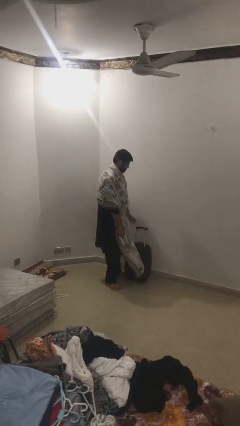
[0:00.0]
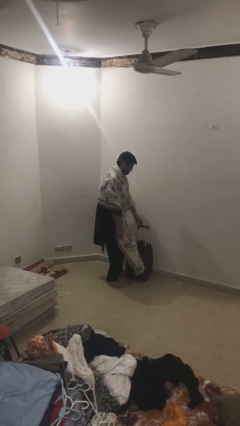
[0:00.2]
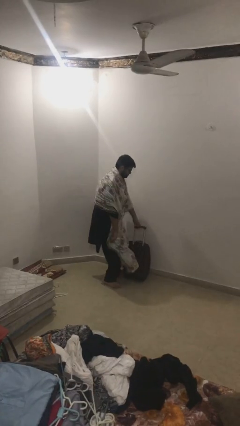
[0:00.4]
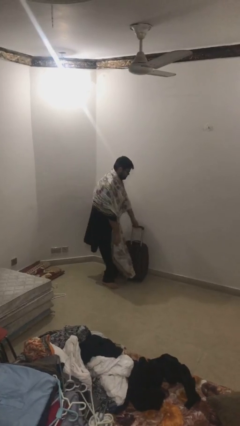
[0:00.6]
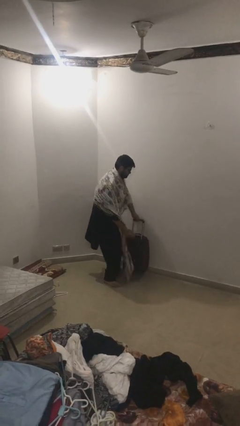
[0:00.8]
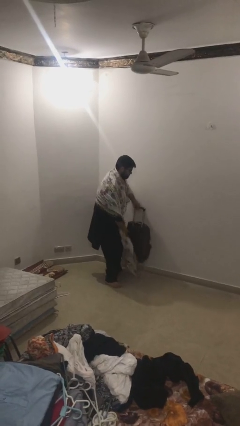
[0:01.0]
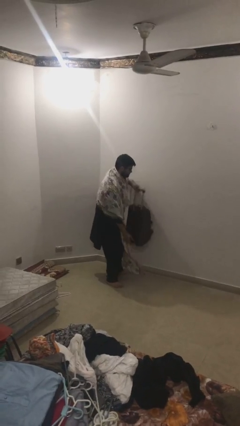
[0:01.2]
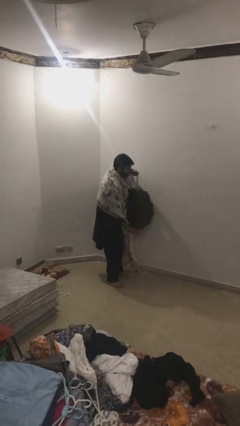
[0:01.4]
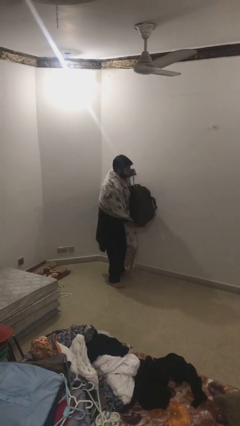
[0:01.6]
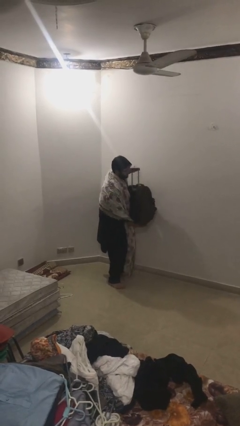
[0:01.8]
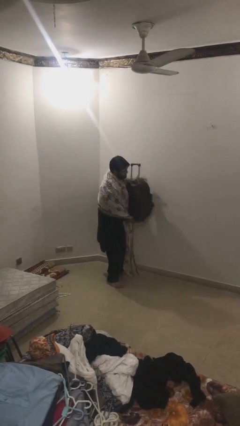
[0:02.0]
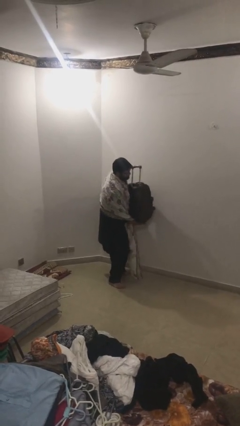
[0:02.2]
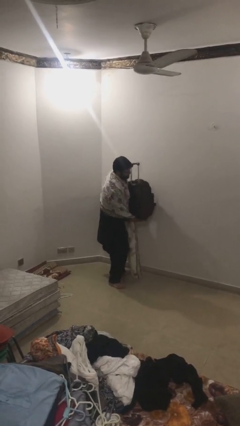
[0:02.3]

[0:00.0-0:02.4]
person picks up object from floor

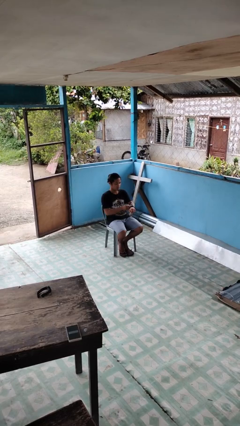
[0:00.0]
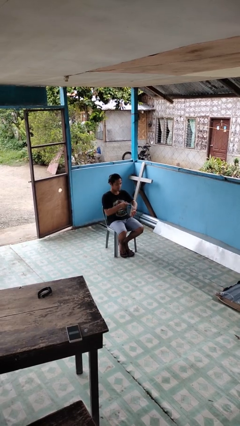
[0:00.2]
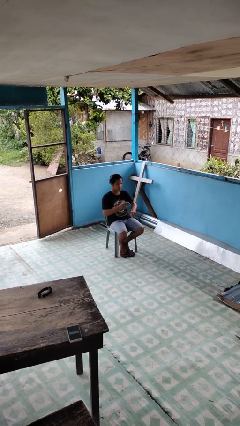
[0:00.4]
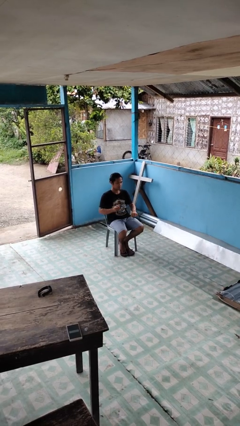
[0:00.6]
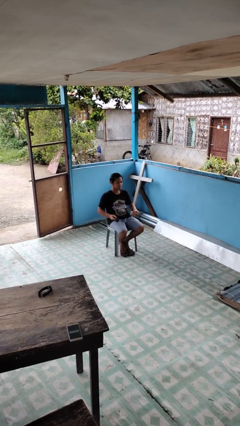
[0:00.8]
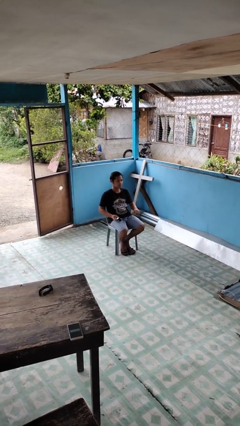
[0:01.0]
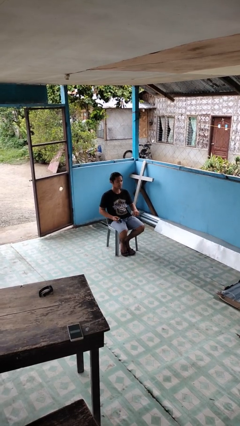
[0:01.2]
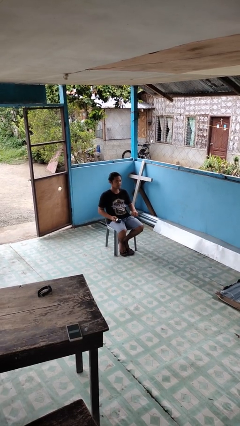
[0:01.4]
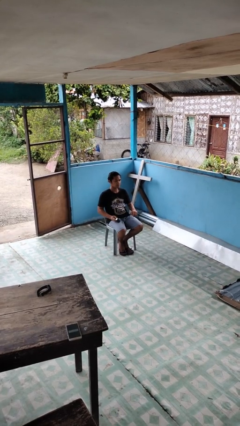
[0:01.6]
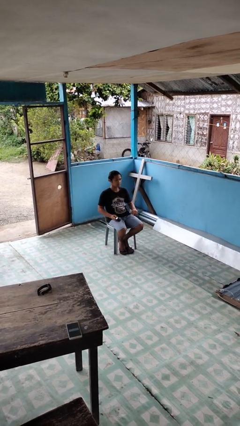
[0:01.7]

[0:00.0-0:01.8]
person takes off wristwatch

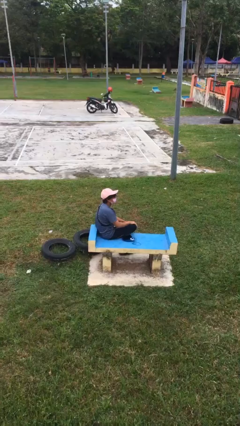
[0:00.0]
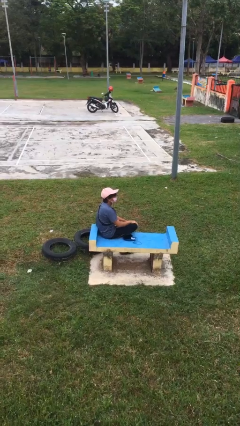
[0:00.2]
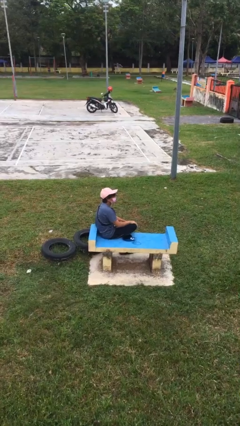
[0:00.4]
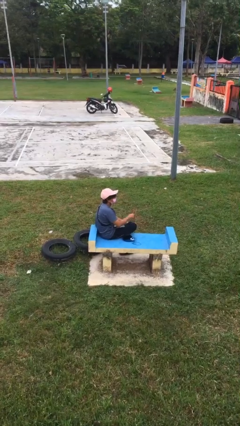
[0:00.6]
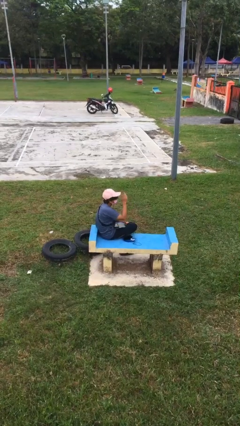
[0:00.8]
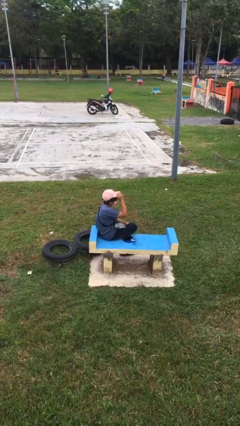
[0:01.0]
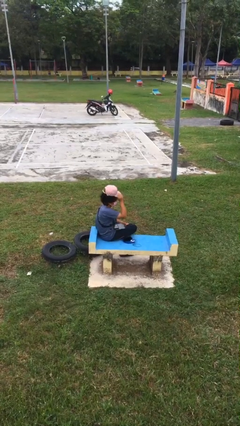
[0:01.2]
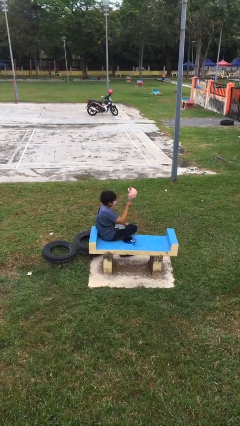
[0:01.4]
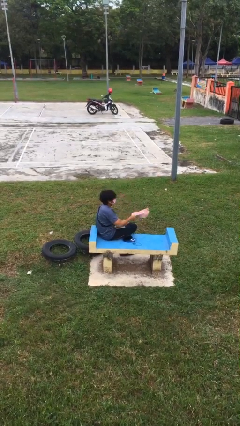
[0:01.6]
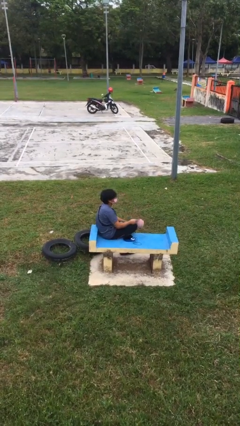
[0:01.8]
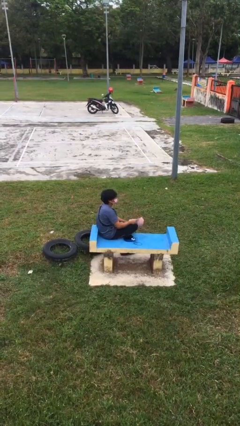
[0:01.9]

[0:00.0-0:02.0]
person takes off hat

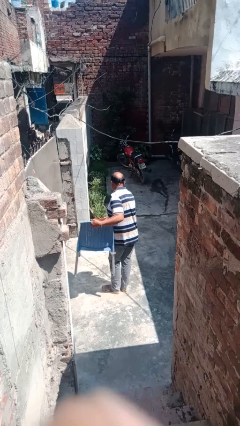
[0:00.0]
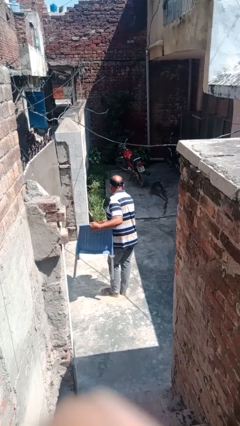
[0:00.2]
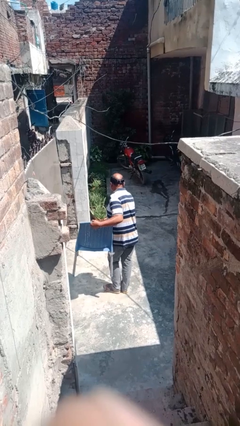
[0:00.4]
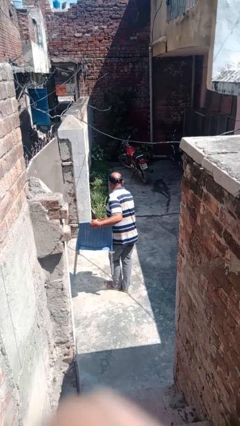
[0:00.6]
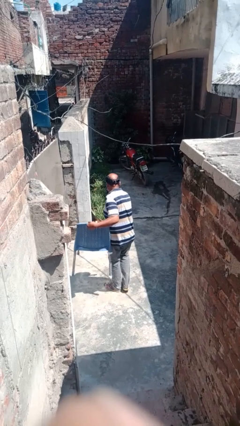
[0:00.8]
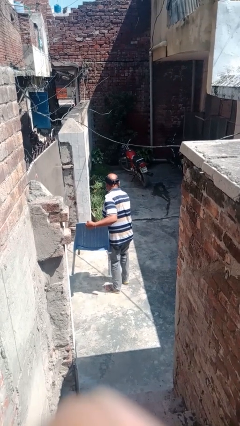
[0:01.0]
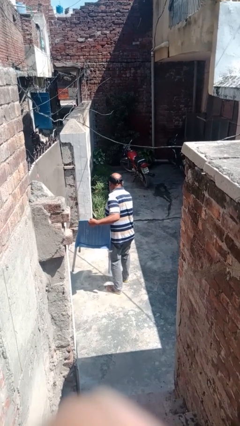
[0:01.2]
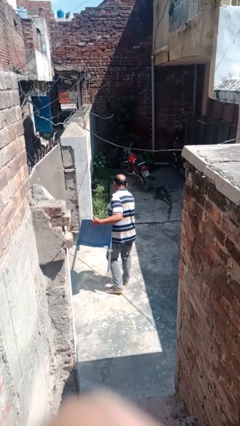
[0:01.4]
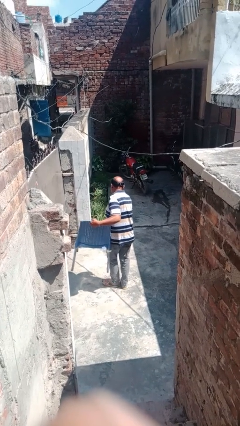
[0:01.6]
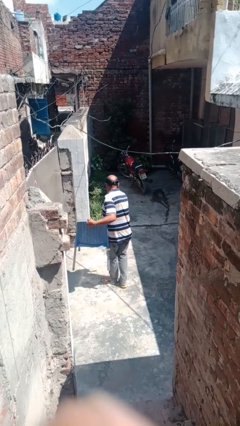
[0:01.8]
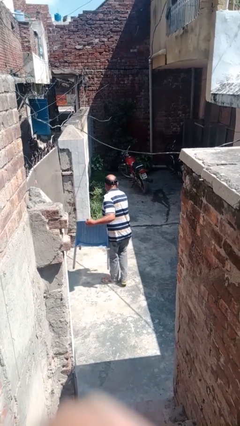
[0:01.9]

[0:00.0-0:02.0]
person carries furniture

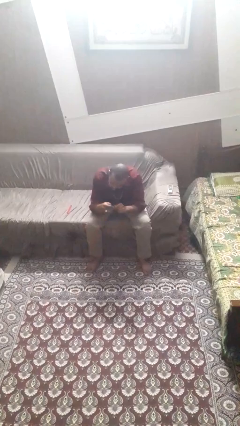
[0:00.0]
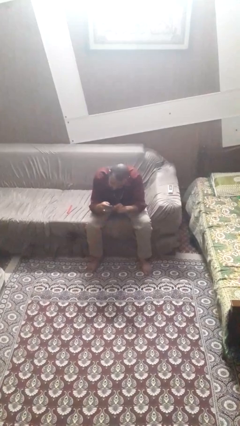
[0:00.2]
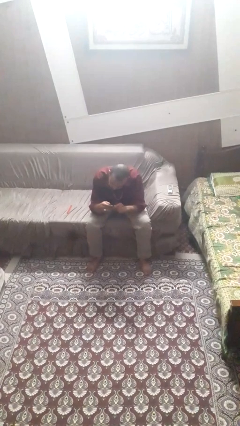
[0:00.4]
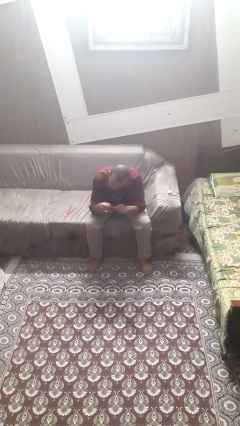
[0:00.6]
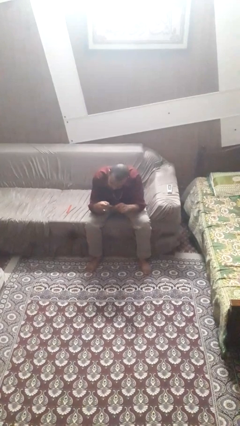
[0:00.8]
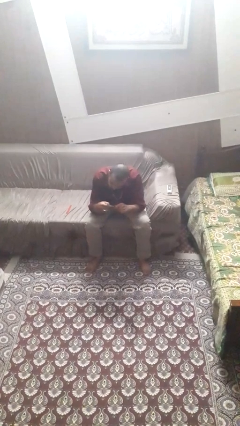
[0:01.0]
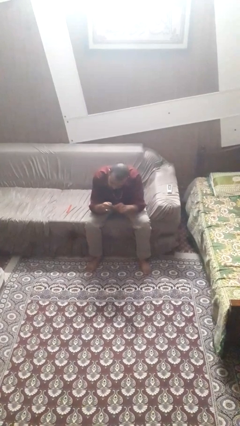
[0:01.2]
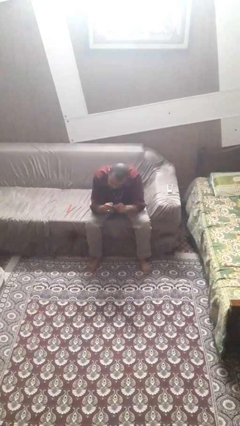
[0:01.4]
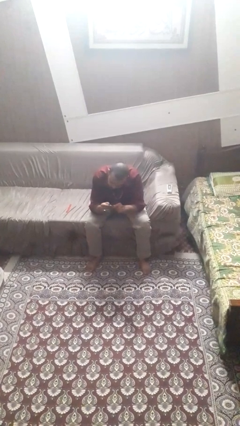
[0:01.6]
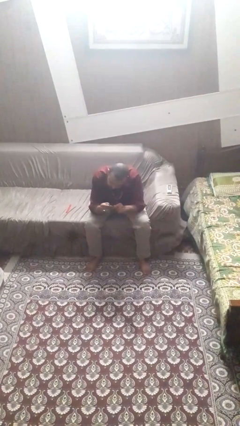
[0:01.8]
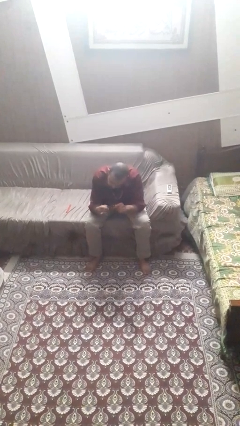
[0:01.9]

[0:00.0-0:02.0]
person files fingernails

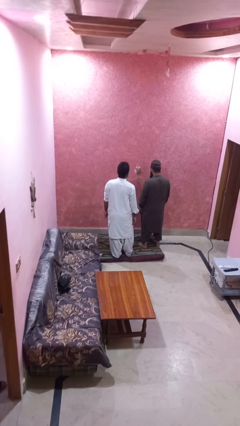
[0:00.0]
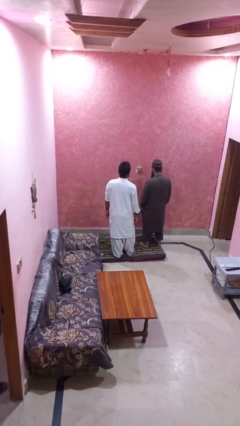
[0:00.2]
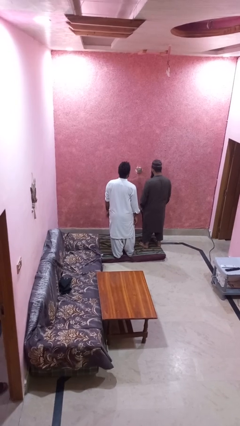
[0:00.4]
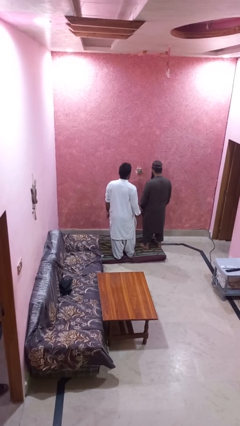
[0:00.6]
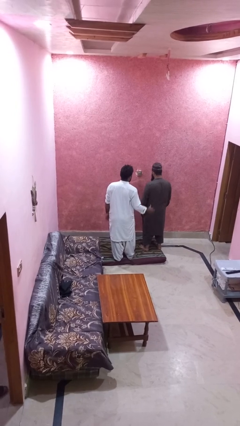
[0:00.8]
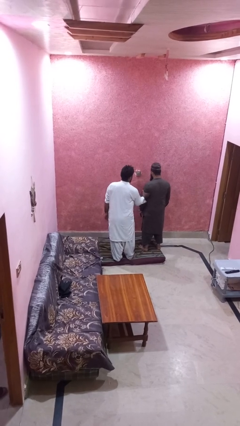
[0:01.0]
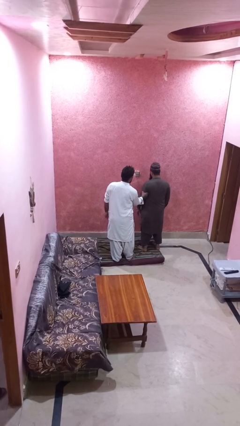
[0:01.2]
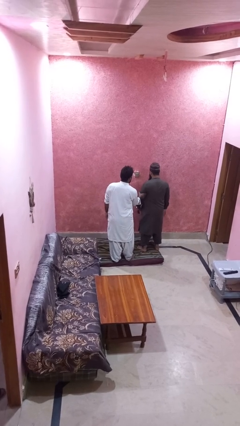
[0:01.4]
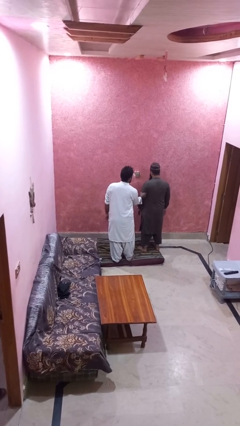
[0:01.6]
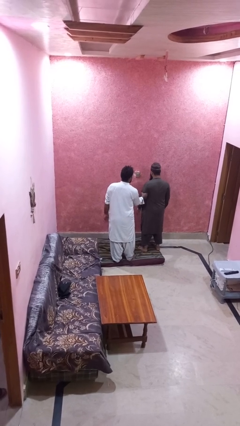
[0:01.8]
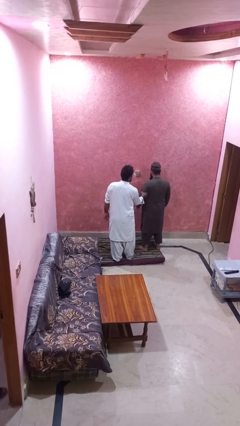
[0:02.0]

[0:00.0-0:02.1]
person grabs person by bicep

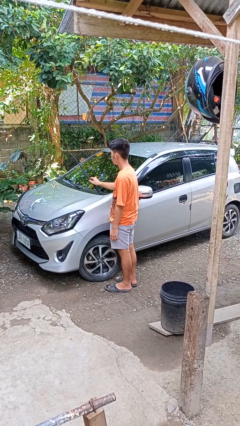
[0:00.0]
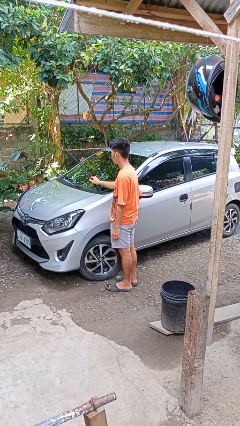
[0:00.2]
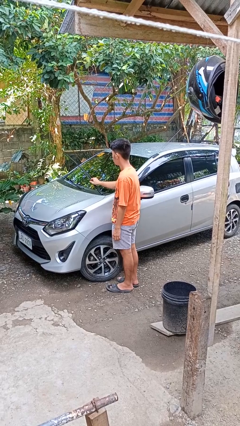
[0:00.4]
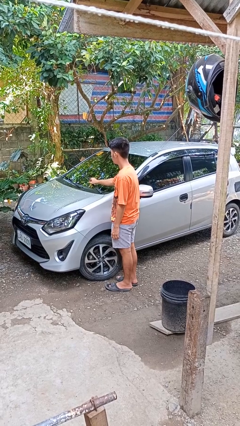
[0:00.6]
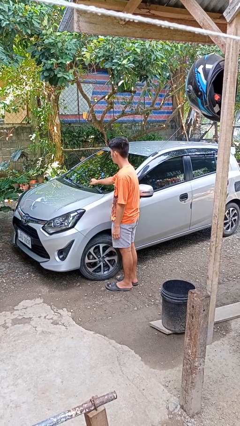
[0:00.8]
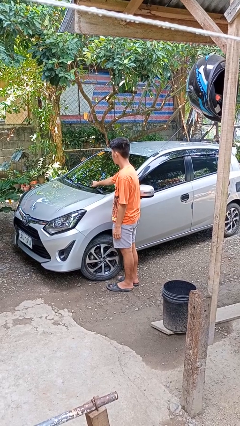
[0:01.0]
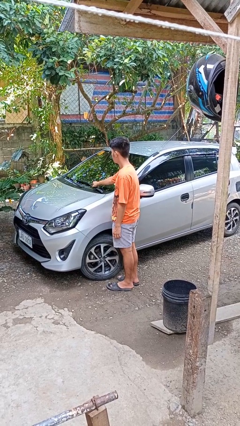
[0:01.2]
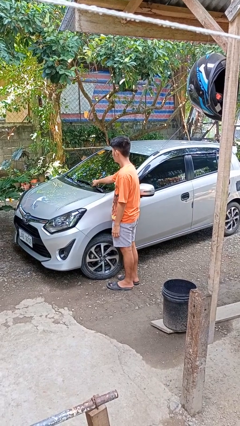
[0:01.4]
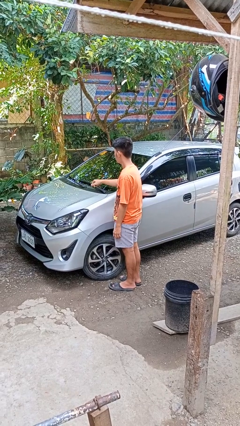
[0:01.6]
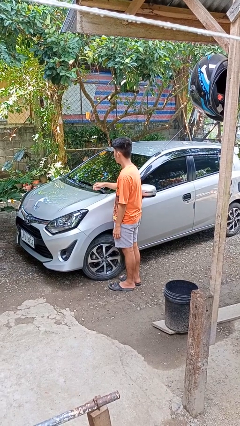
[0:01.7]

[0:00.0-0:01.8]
person flips down car wipers

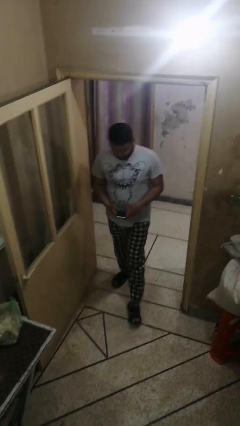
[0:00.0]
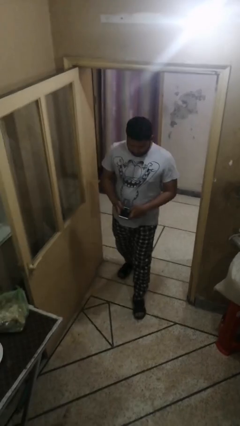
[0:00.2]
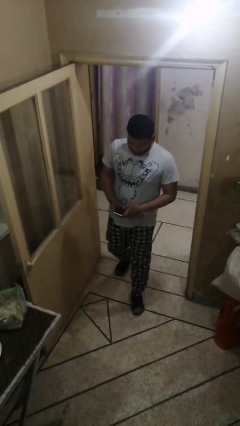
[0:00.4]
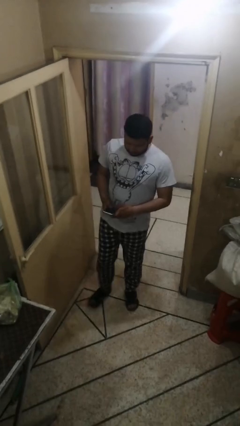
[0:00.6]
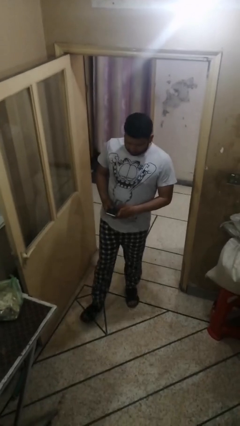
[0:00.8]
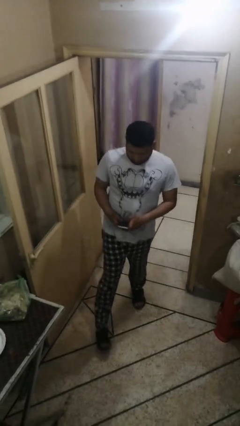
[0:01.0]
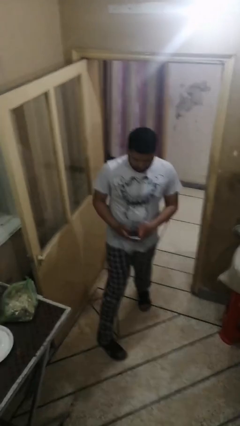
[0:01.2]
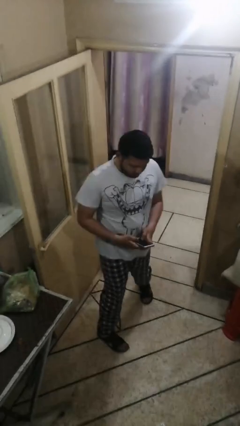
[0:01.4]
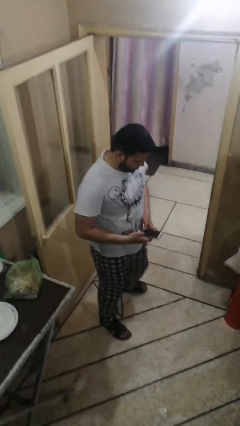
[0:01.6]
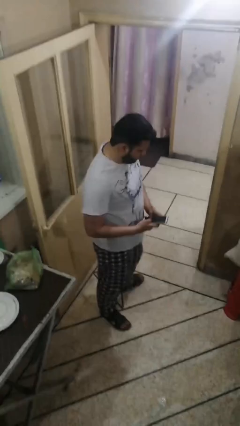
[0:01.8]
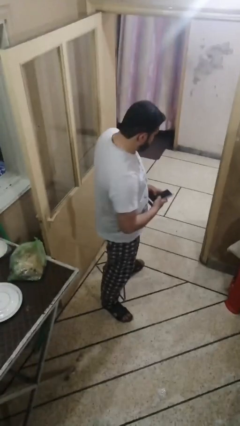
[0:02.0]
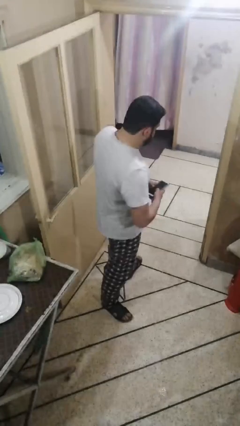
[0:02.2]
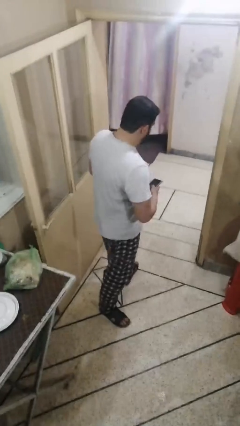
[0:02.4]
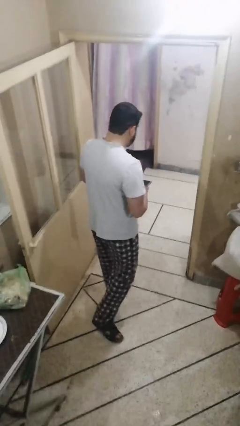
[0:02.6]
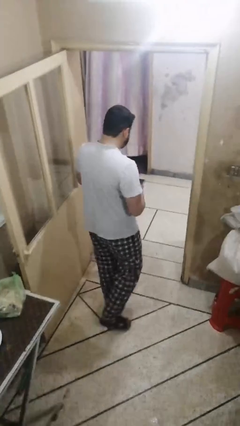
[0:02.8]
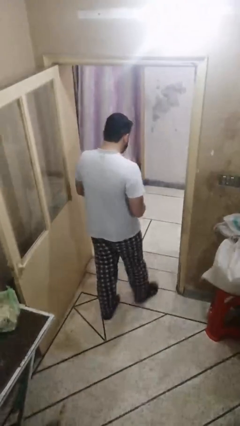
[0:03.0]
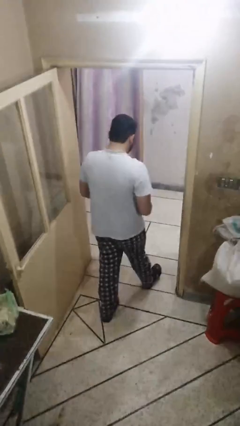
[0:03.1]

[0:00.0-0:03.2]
person enters scene through structure
